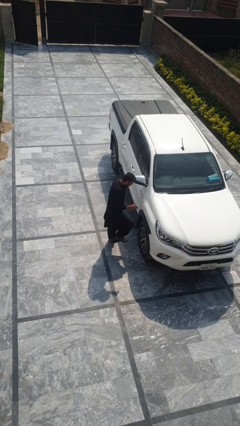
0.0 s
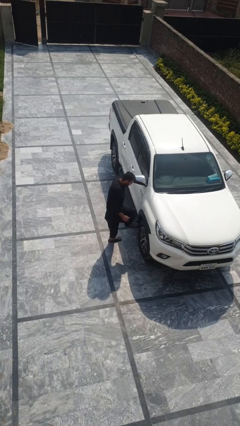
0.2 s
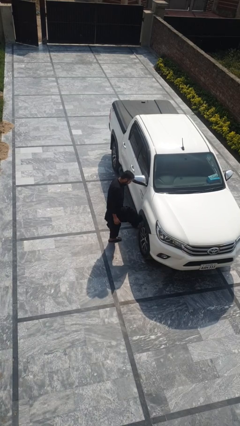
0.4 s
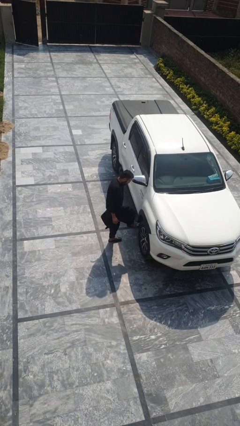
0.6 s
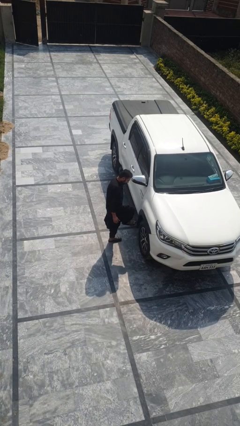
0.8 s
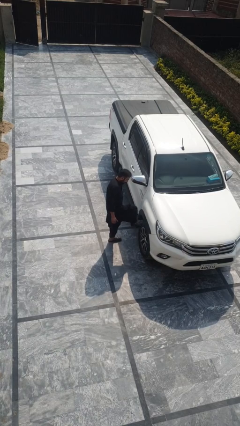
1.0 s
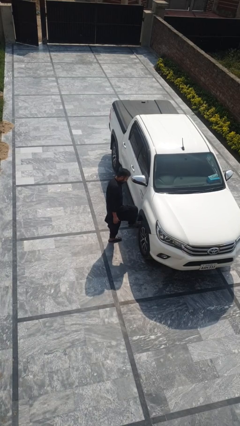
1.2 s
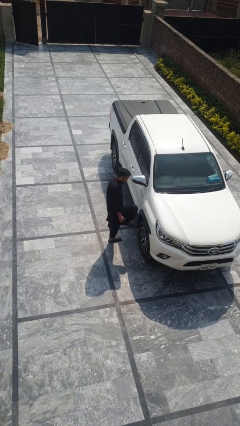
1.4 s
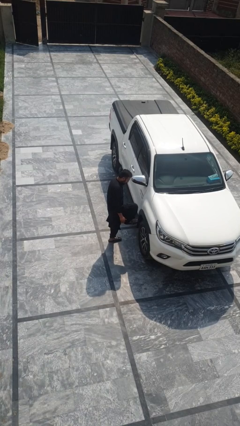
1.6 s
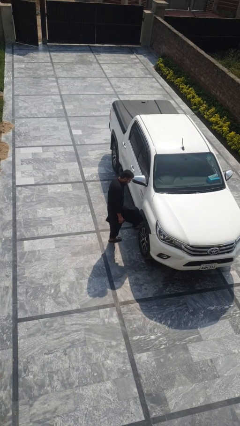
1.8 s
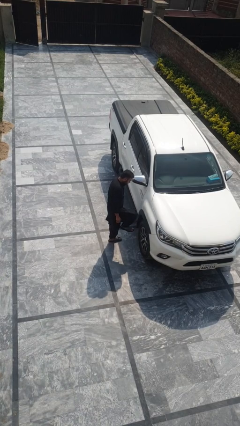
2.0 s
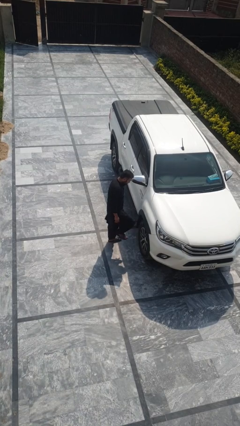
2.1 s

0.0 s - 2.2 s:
person kicks car tires

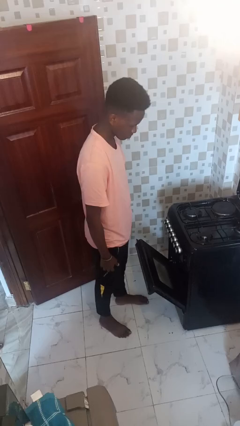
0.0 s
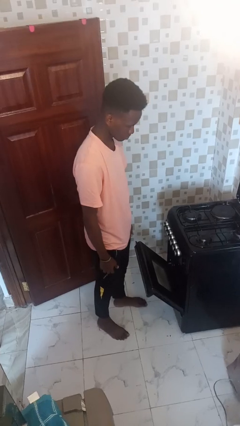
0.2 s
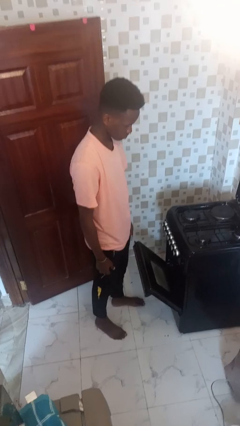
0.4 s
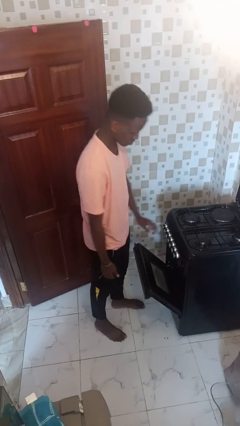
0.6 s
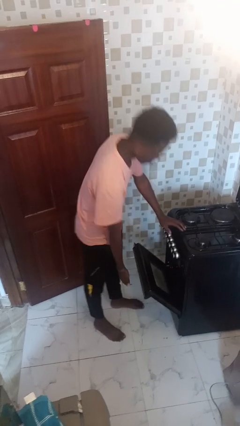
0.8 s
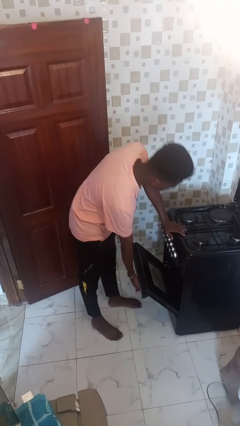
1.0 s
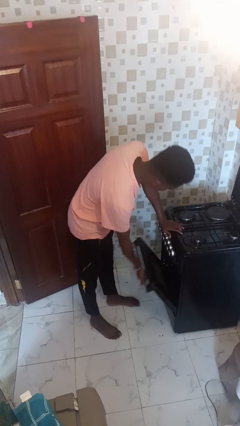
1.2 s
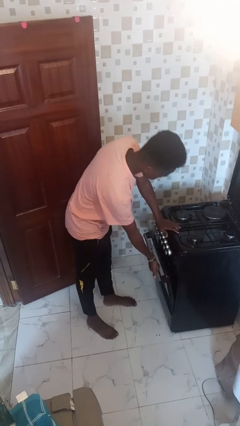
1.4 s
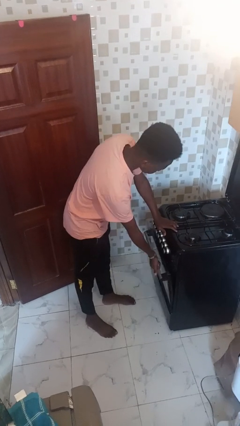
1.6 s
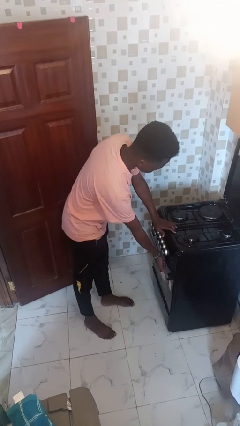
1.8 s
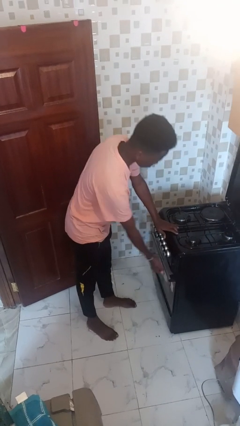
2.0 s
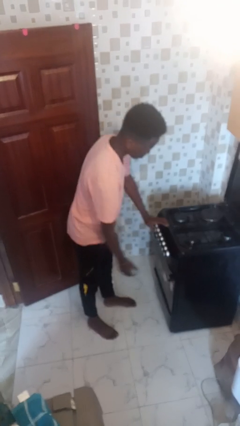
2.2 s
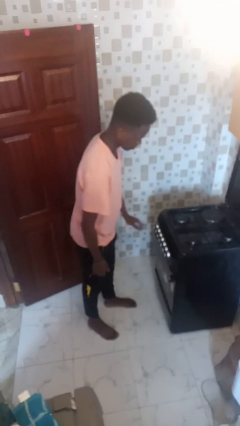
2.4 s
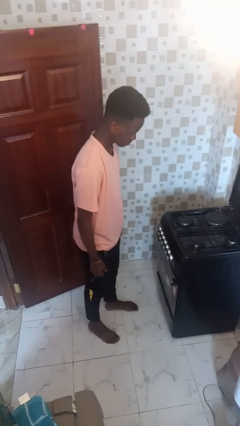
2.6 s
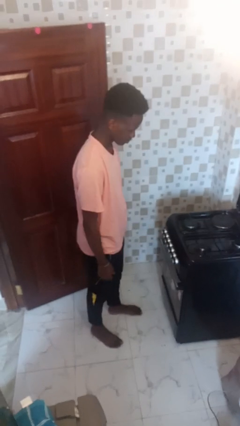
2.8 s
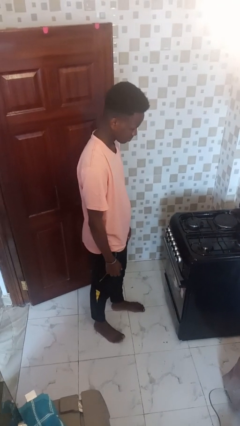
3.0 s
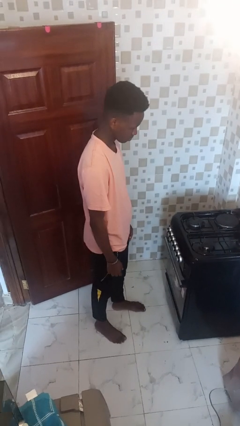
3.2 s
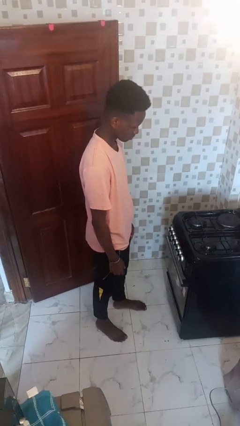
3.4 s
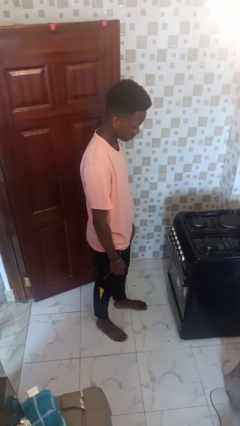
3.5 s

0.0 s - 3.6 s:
person closes oven door

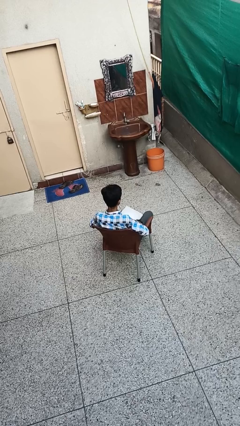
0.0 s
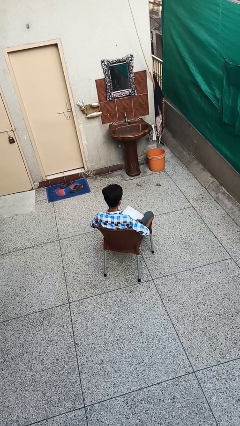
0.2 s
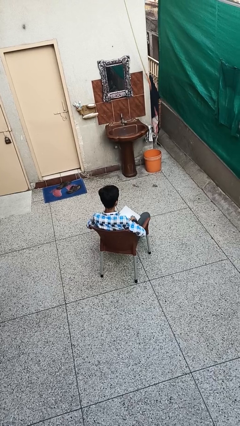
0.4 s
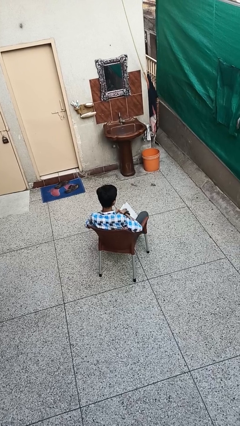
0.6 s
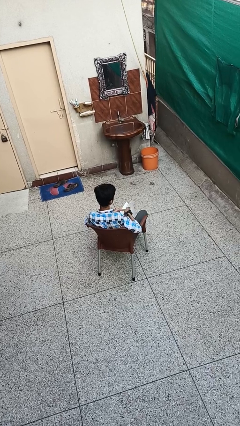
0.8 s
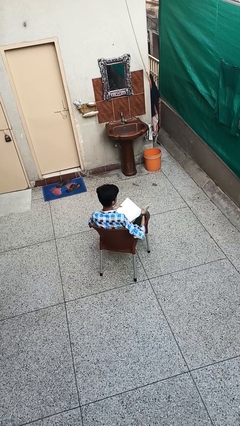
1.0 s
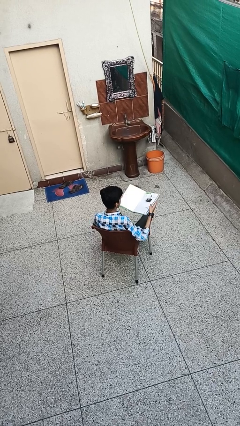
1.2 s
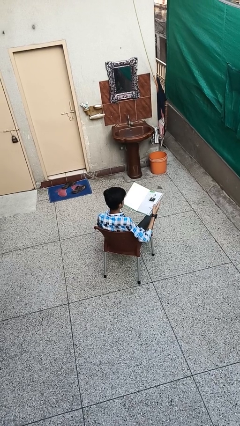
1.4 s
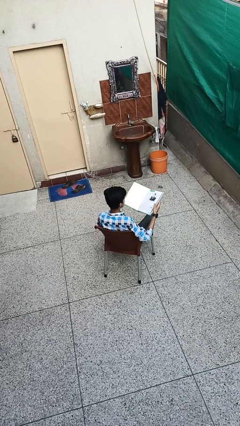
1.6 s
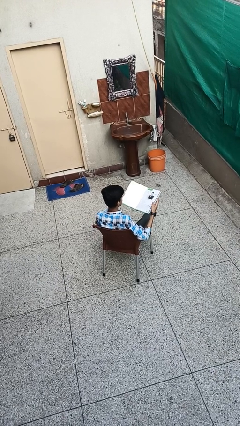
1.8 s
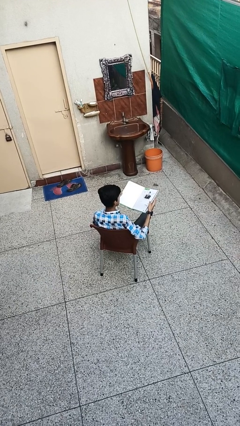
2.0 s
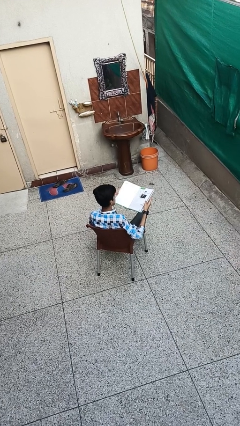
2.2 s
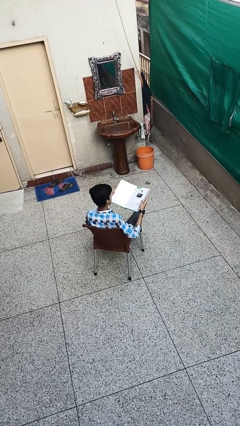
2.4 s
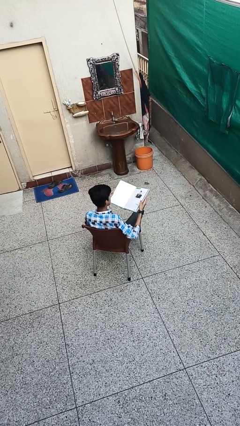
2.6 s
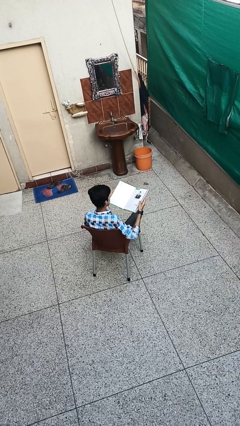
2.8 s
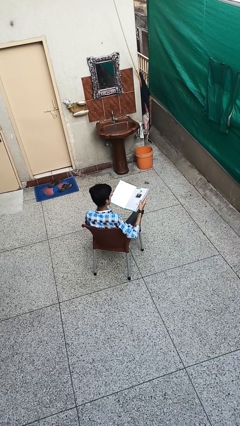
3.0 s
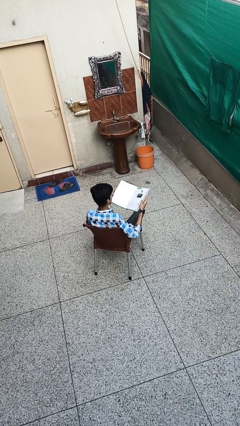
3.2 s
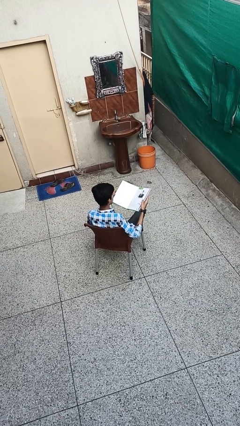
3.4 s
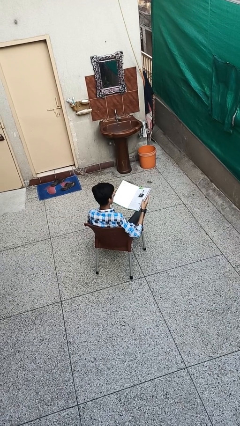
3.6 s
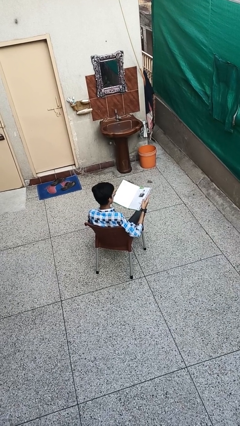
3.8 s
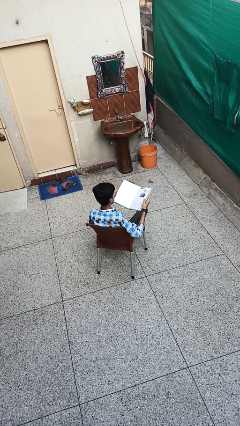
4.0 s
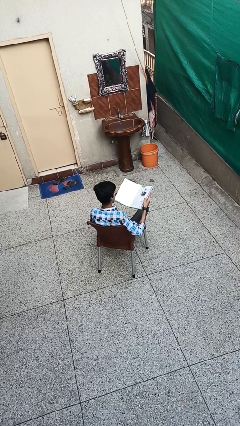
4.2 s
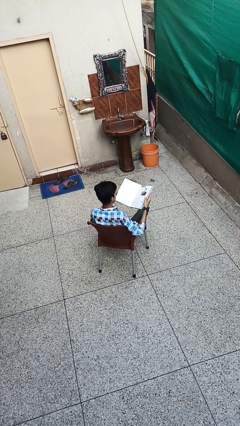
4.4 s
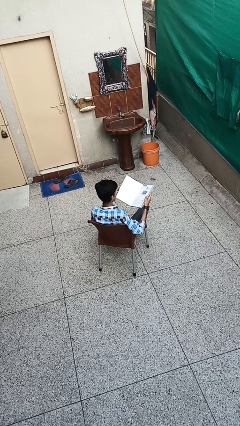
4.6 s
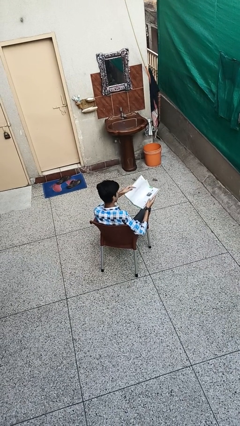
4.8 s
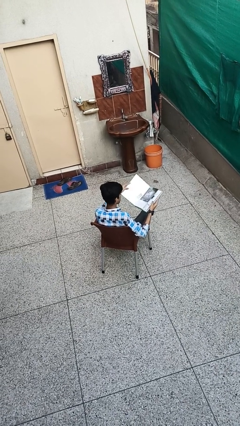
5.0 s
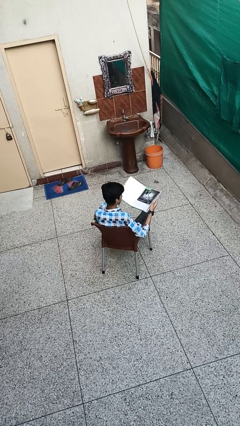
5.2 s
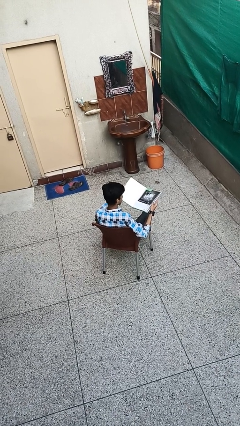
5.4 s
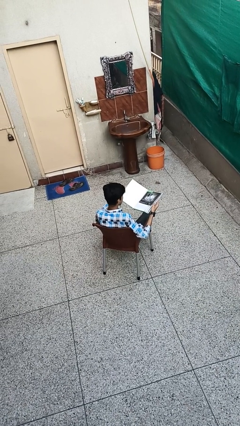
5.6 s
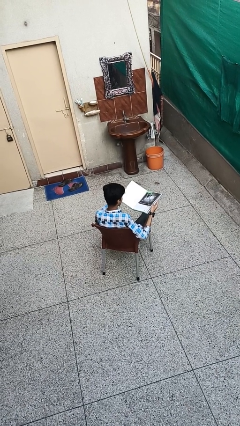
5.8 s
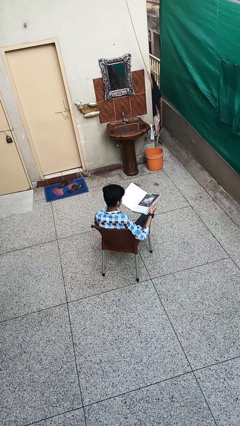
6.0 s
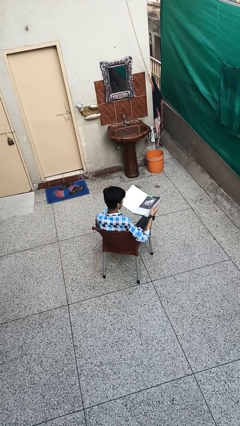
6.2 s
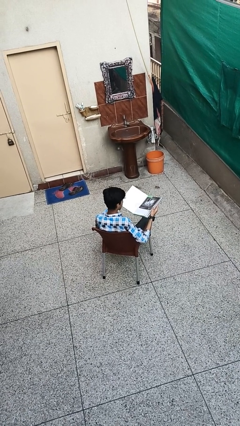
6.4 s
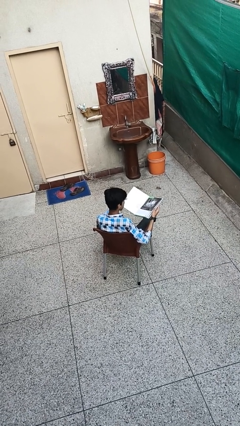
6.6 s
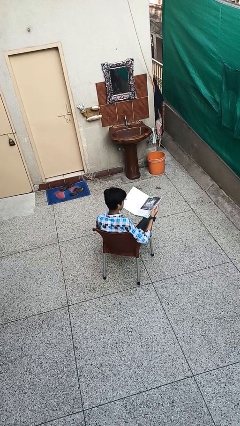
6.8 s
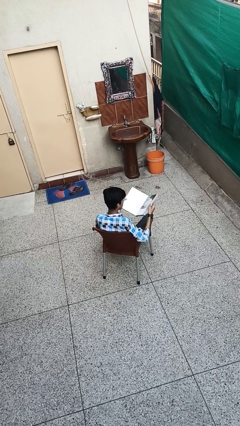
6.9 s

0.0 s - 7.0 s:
person reads book

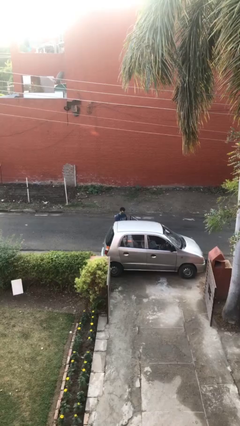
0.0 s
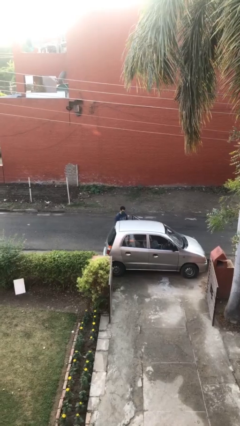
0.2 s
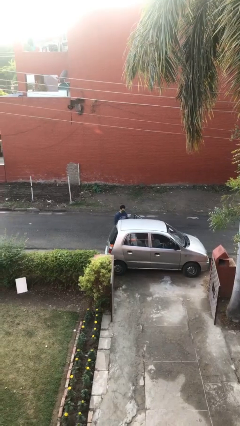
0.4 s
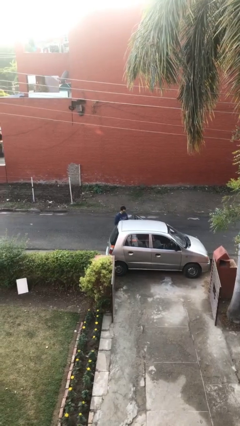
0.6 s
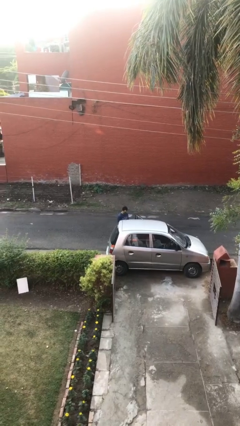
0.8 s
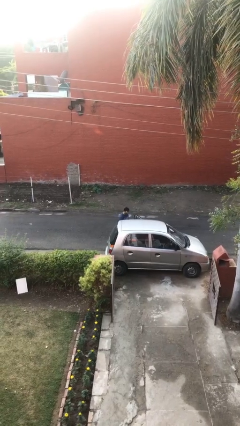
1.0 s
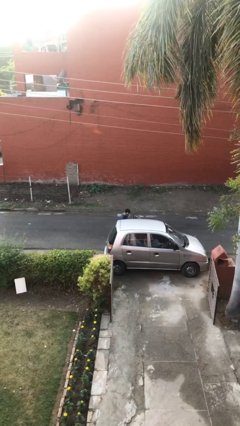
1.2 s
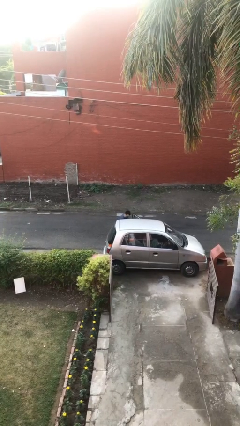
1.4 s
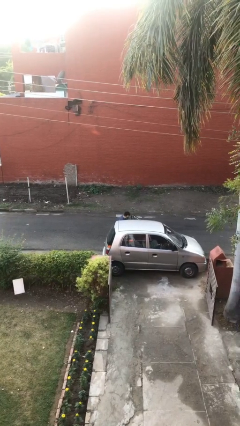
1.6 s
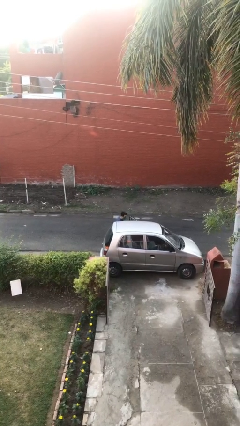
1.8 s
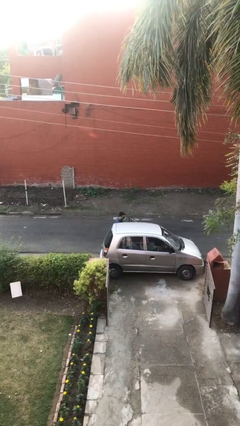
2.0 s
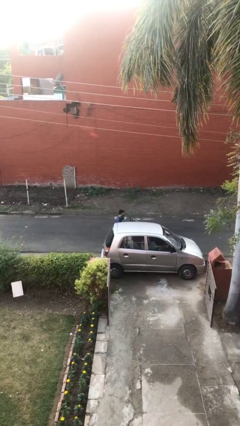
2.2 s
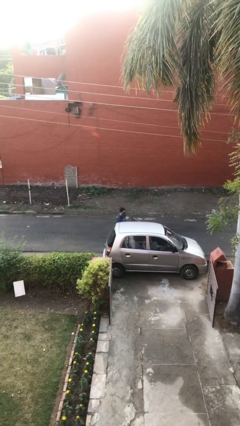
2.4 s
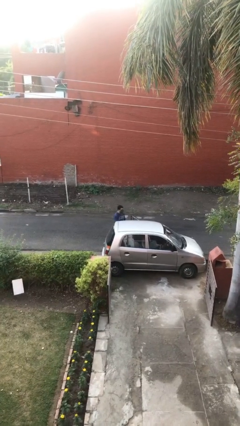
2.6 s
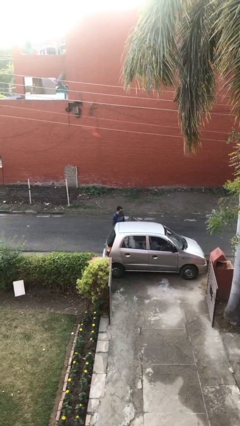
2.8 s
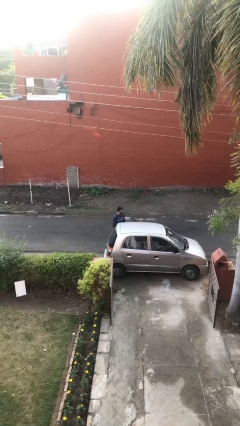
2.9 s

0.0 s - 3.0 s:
person unloads car

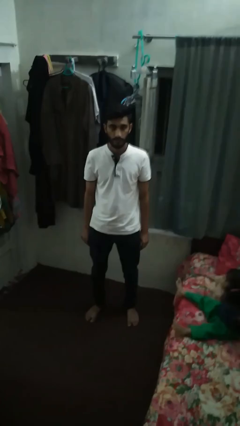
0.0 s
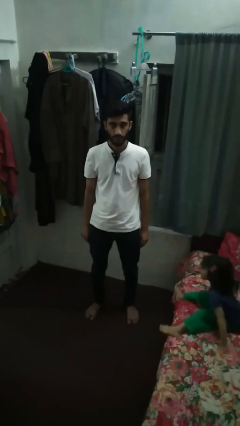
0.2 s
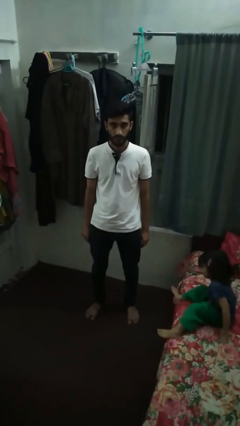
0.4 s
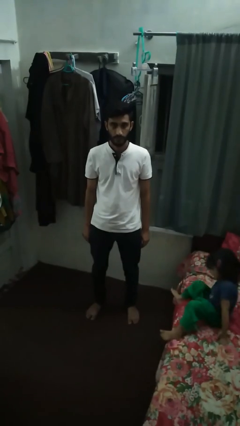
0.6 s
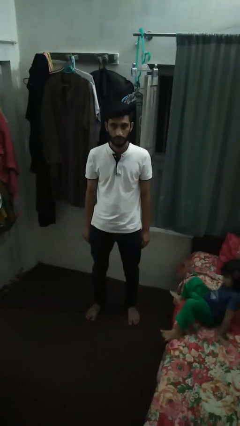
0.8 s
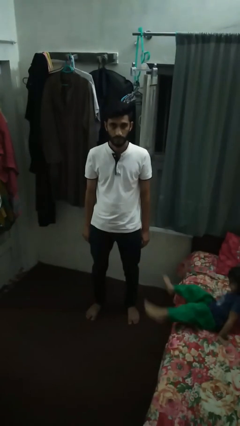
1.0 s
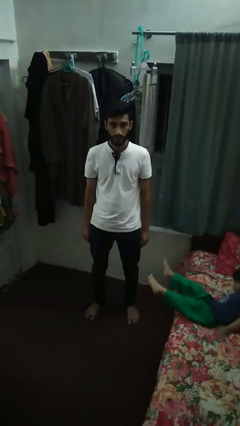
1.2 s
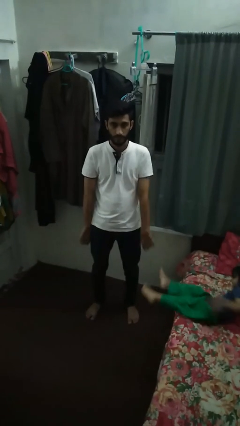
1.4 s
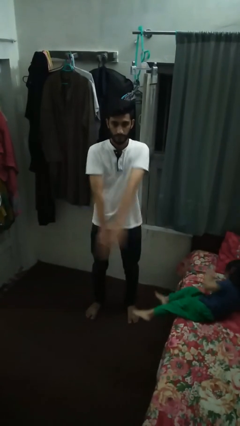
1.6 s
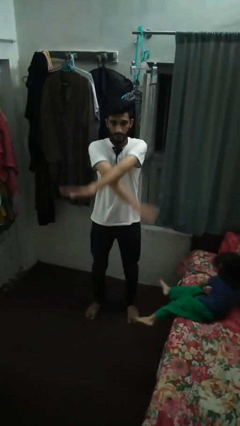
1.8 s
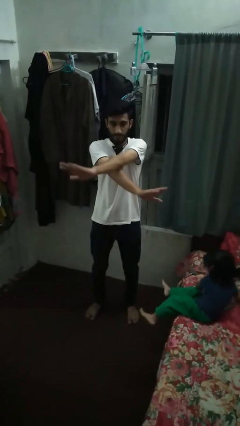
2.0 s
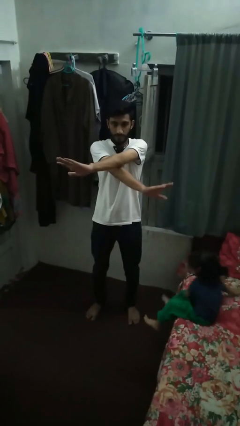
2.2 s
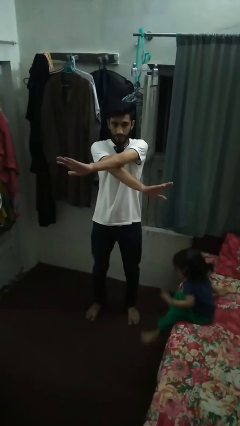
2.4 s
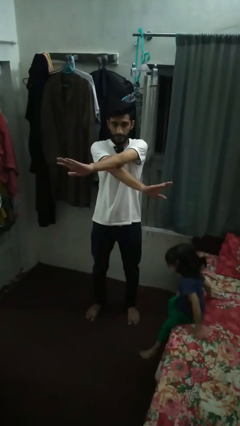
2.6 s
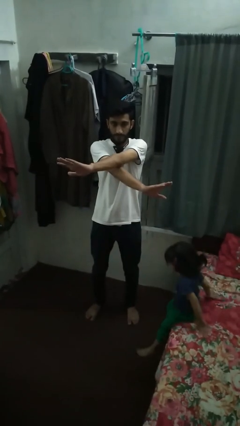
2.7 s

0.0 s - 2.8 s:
person gestures arms x
